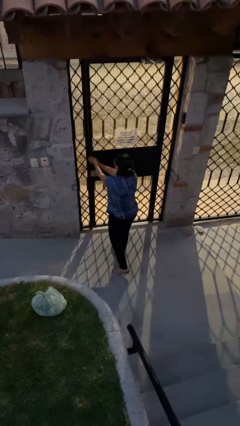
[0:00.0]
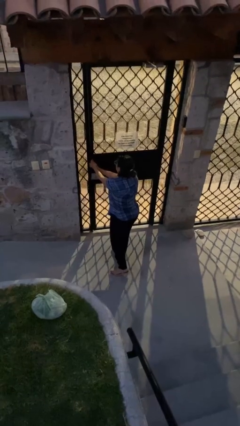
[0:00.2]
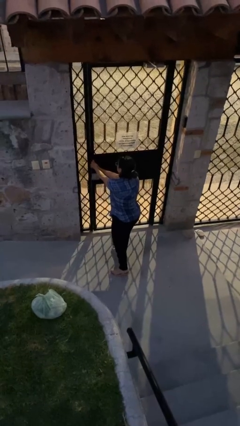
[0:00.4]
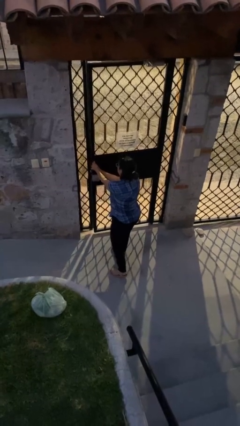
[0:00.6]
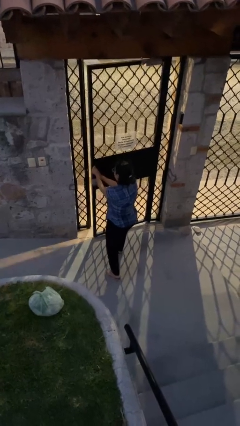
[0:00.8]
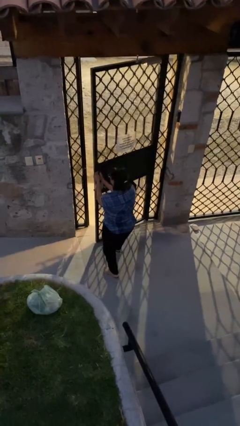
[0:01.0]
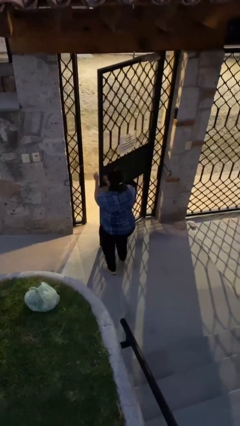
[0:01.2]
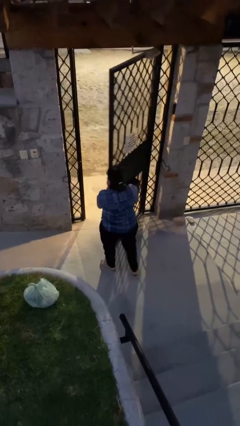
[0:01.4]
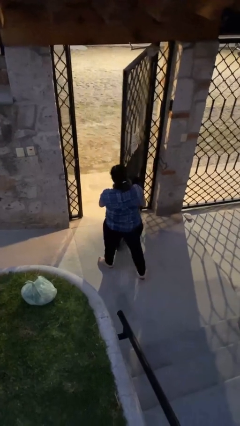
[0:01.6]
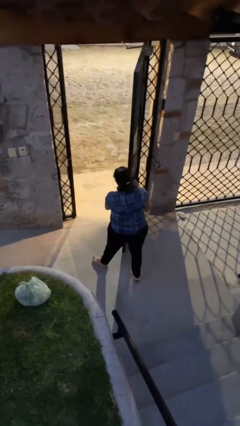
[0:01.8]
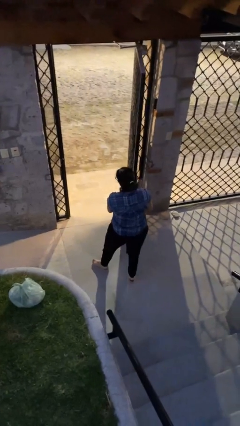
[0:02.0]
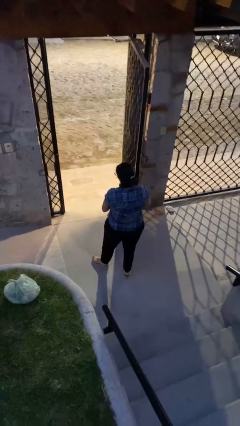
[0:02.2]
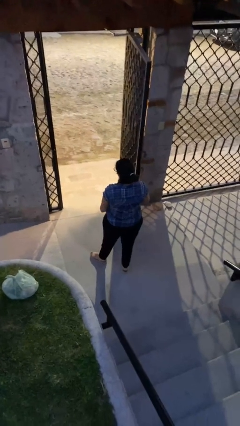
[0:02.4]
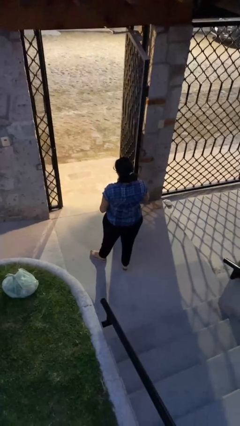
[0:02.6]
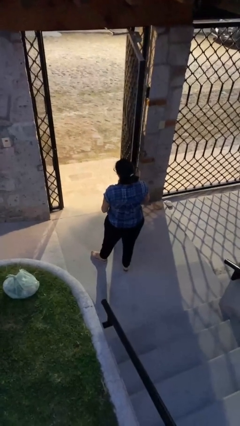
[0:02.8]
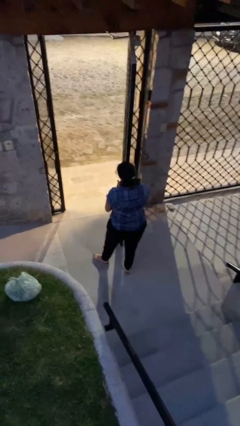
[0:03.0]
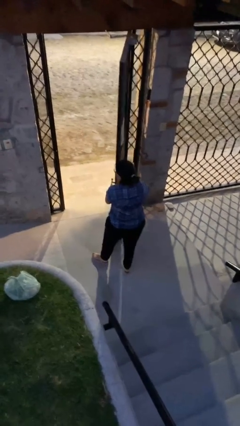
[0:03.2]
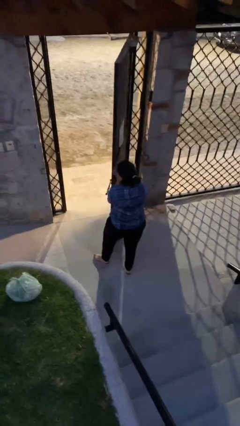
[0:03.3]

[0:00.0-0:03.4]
person opens facility door

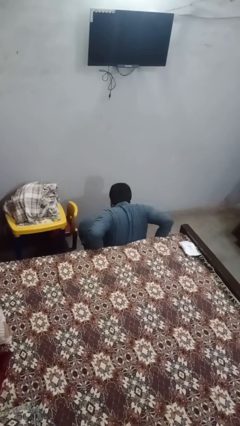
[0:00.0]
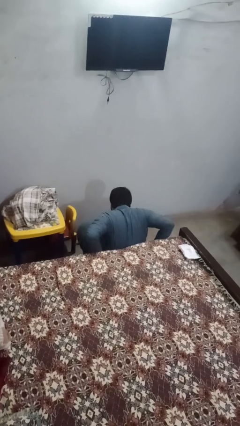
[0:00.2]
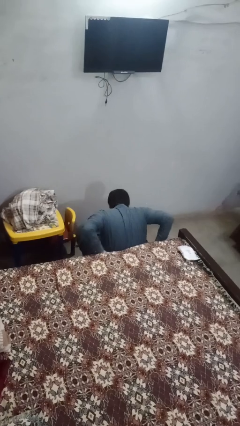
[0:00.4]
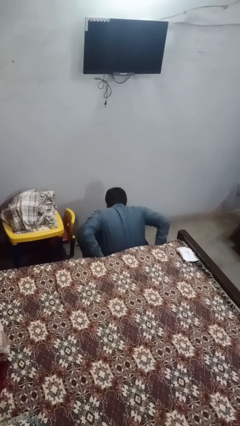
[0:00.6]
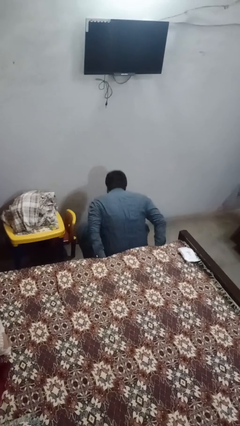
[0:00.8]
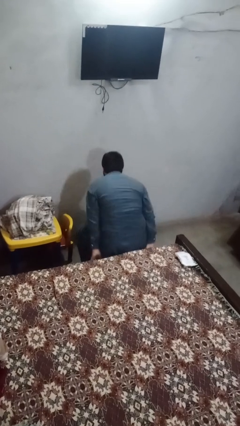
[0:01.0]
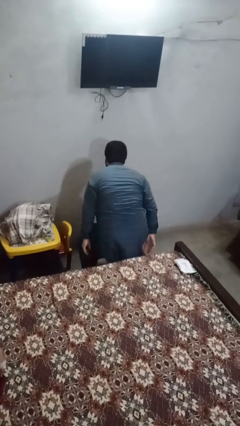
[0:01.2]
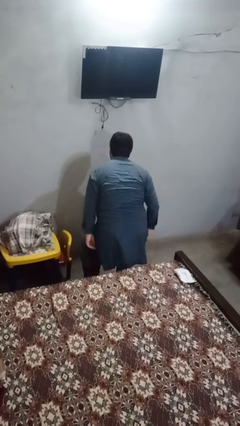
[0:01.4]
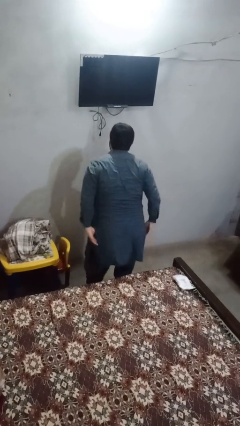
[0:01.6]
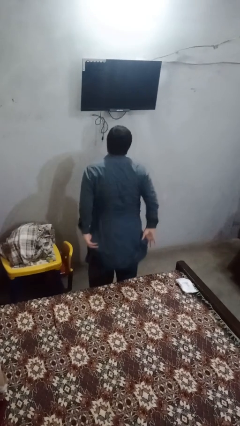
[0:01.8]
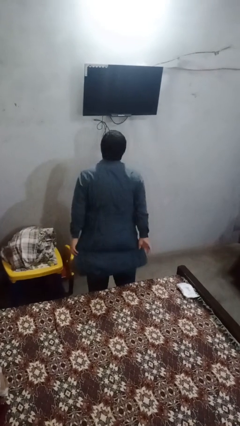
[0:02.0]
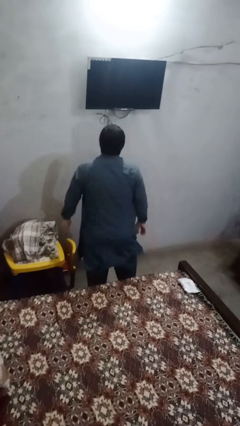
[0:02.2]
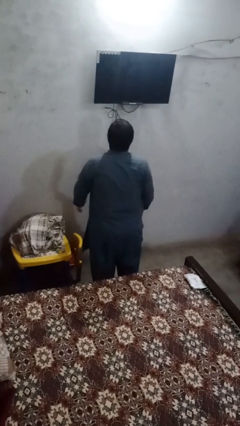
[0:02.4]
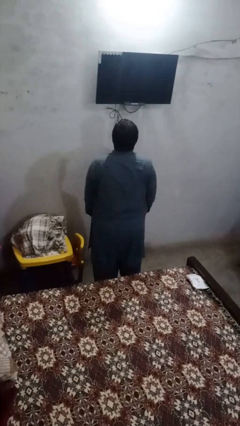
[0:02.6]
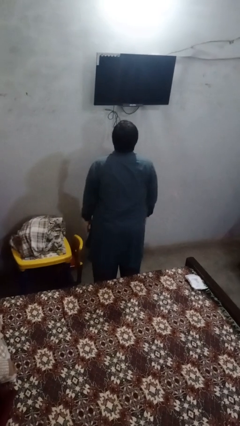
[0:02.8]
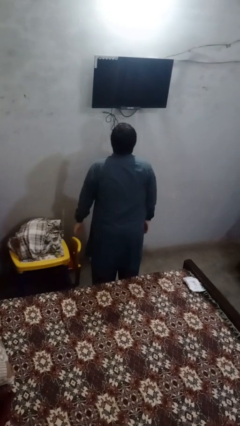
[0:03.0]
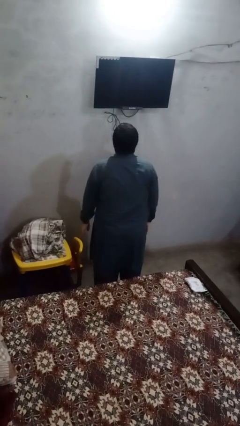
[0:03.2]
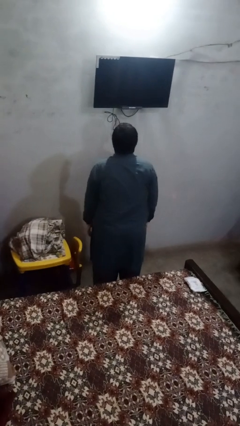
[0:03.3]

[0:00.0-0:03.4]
person stands up from floor

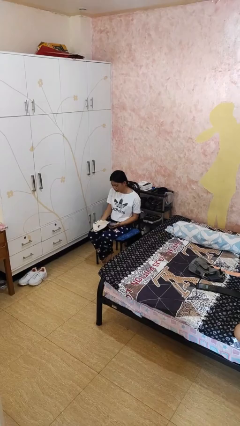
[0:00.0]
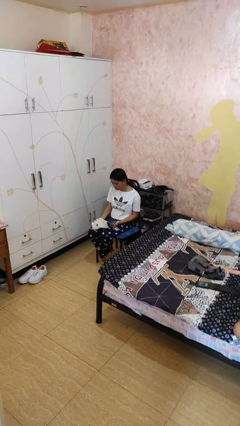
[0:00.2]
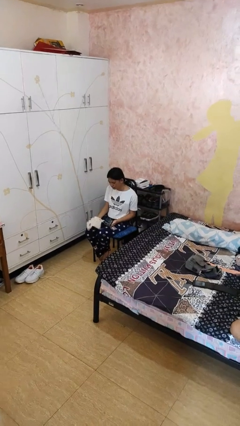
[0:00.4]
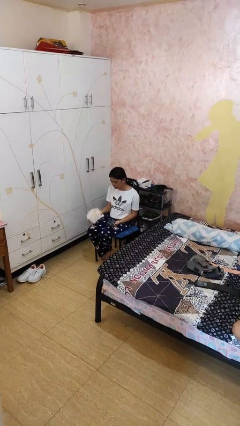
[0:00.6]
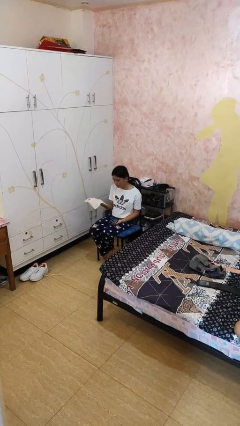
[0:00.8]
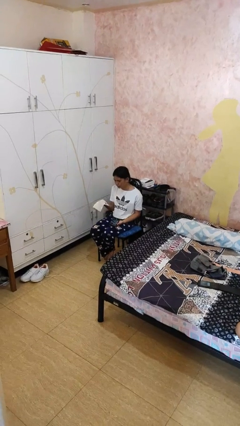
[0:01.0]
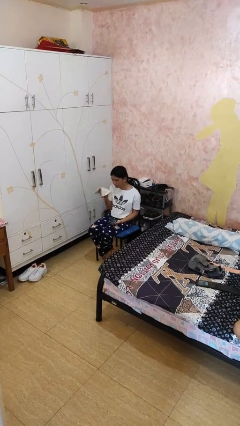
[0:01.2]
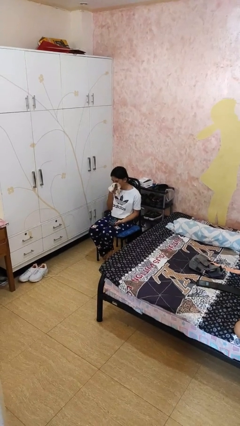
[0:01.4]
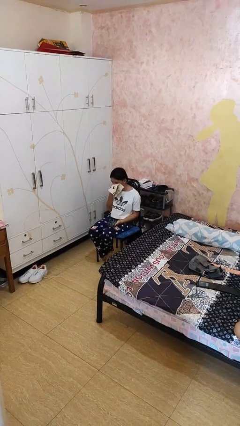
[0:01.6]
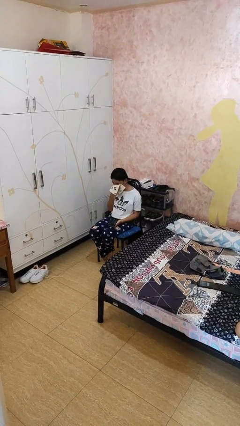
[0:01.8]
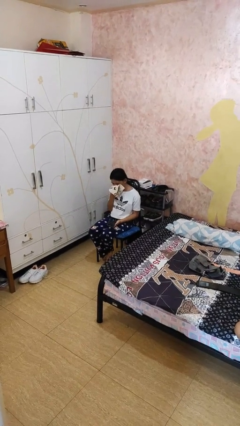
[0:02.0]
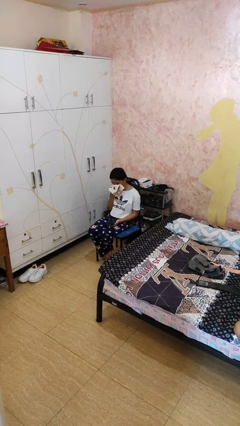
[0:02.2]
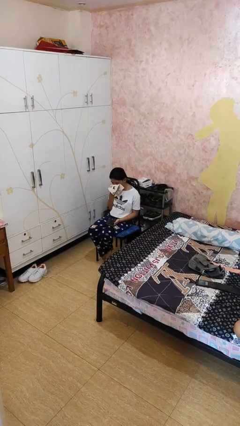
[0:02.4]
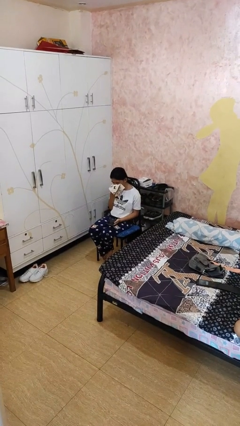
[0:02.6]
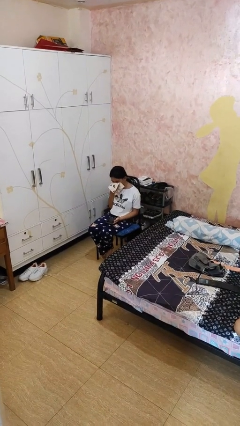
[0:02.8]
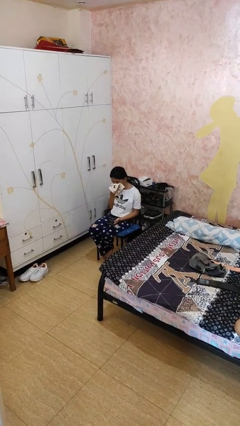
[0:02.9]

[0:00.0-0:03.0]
person blows nose

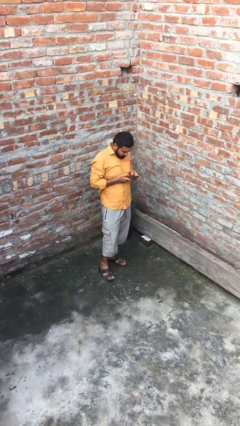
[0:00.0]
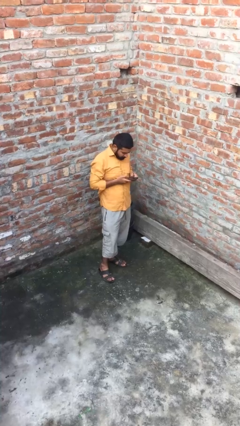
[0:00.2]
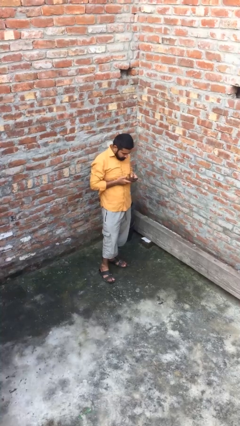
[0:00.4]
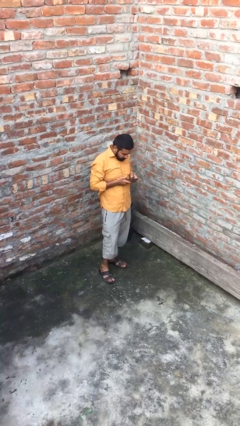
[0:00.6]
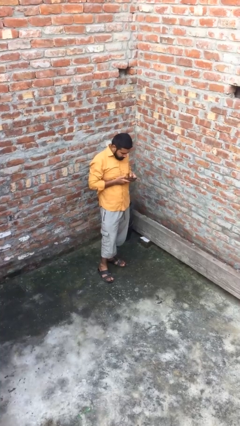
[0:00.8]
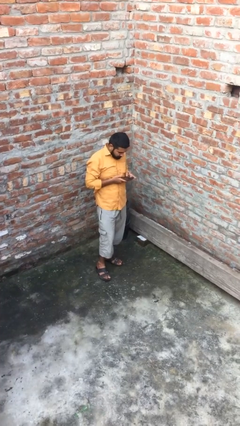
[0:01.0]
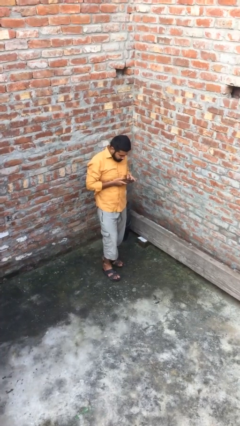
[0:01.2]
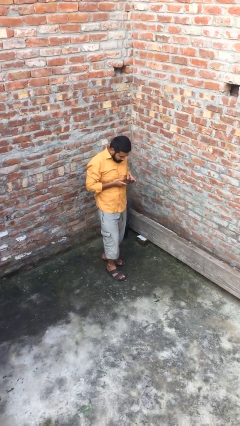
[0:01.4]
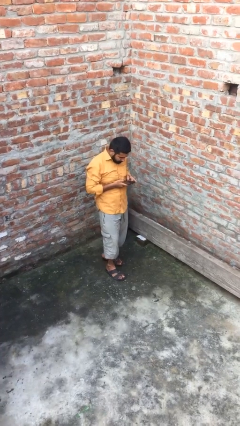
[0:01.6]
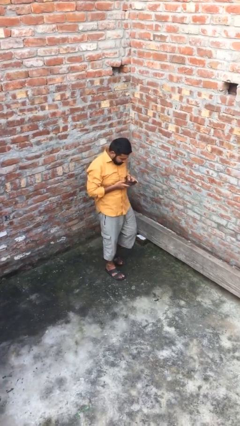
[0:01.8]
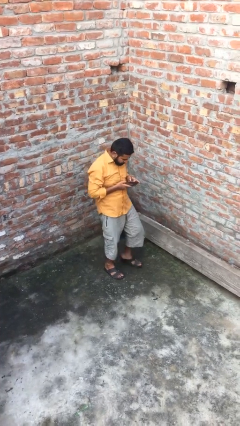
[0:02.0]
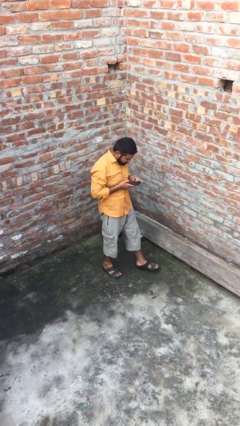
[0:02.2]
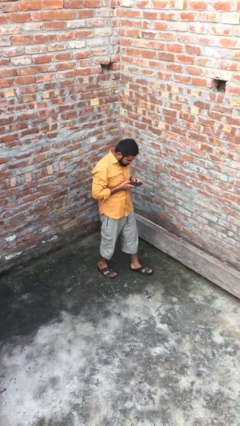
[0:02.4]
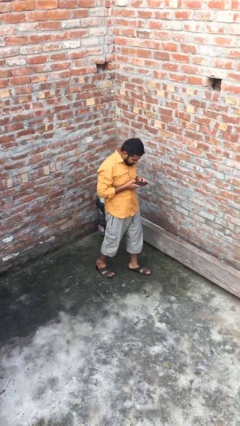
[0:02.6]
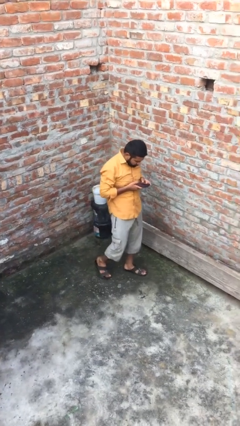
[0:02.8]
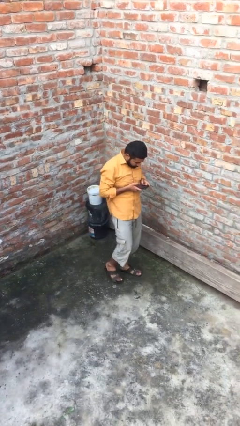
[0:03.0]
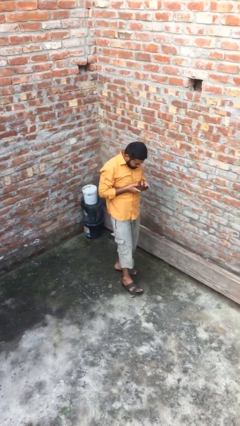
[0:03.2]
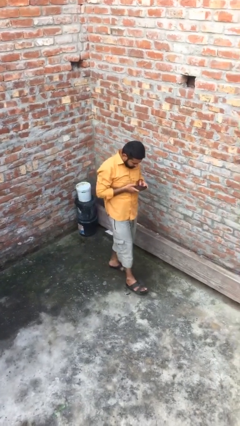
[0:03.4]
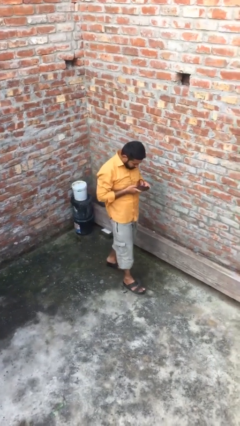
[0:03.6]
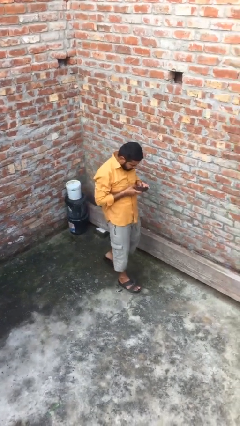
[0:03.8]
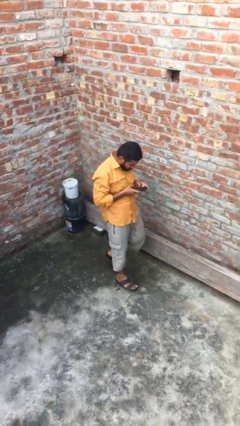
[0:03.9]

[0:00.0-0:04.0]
person texts on phone

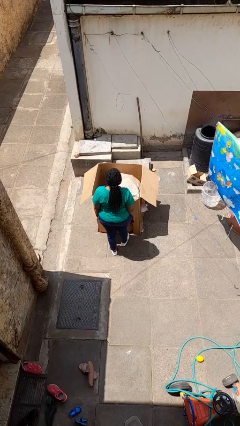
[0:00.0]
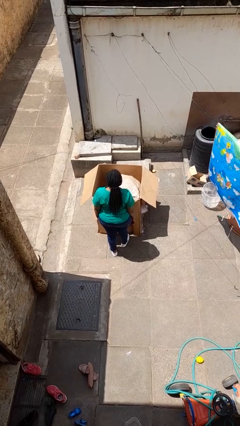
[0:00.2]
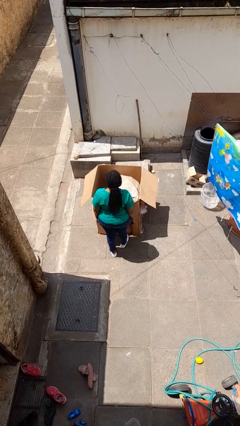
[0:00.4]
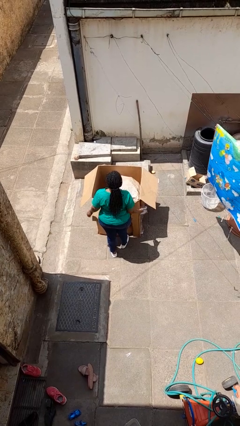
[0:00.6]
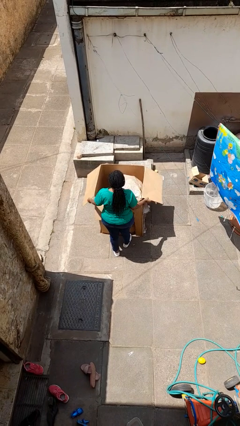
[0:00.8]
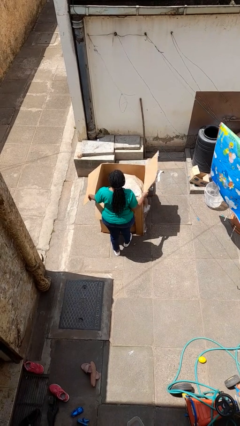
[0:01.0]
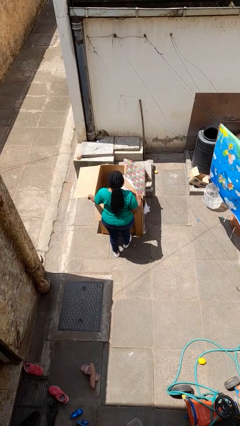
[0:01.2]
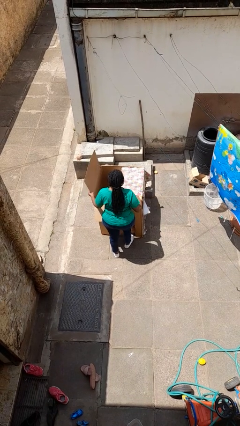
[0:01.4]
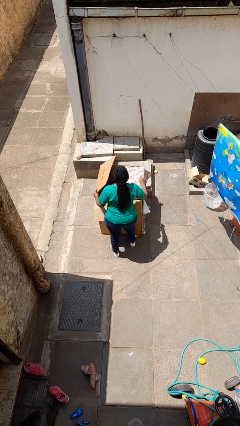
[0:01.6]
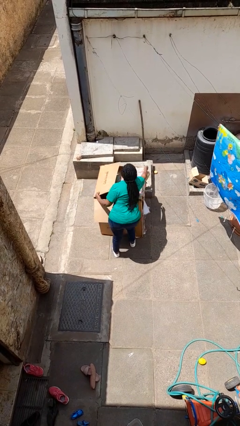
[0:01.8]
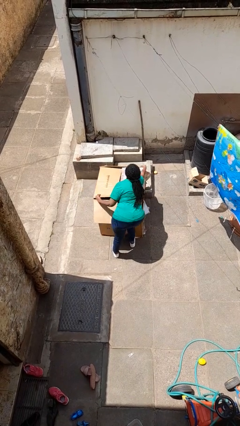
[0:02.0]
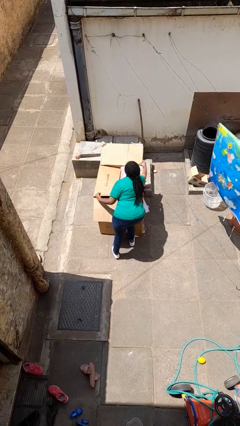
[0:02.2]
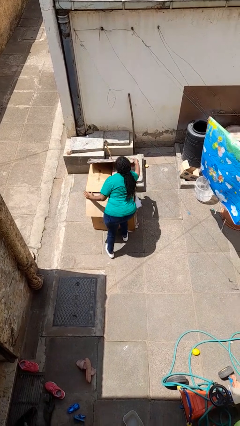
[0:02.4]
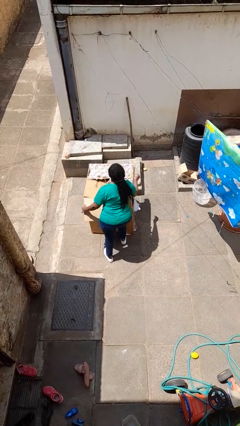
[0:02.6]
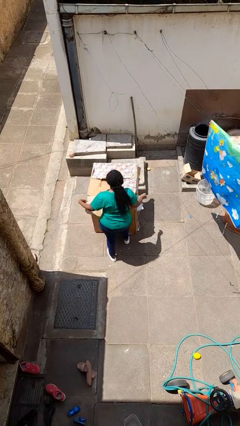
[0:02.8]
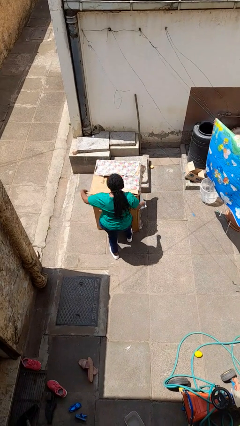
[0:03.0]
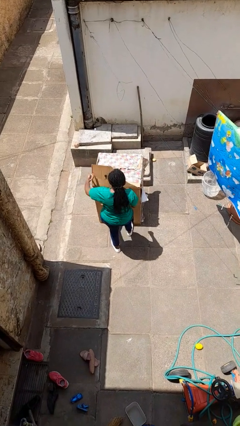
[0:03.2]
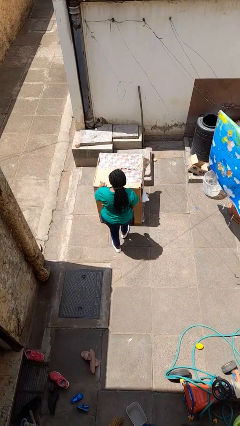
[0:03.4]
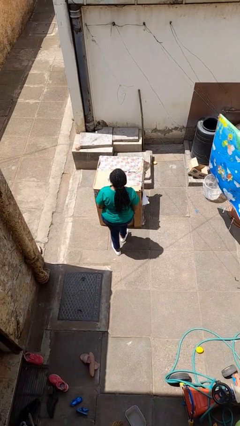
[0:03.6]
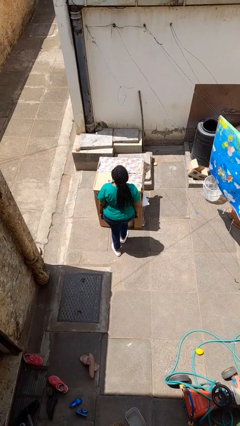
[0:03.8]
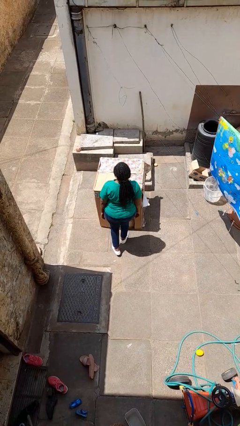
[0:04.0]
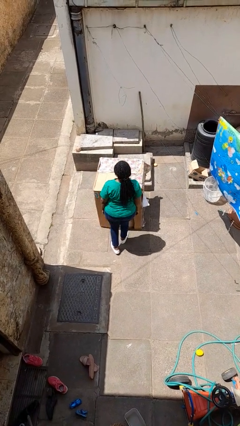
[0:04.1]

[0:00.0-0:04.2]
person closes box
